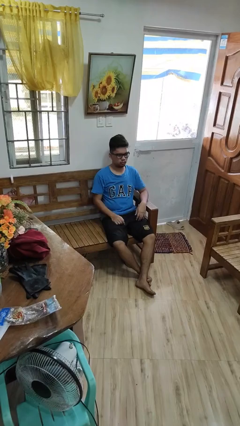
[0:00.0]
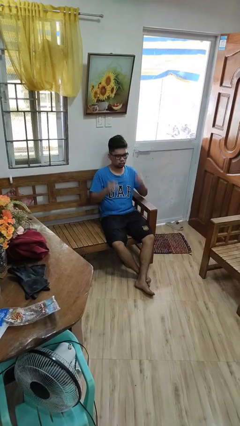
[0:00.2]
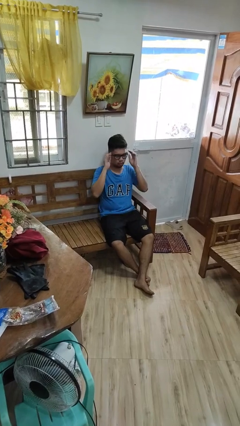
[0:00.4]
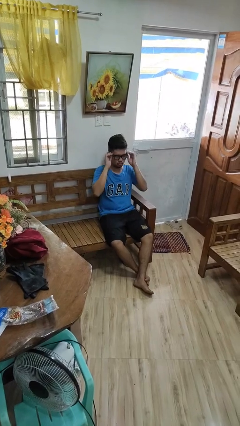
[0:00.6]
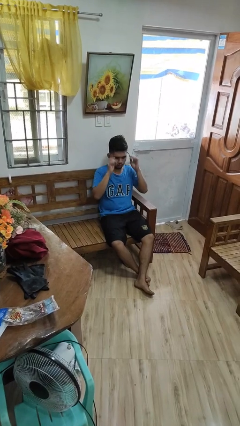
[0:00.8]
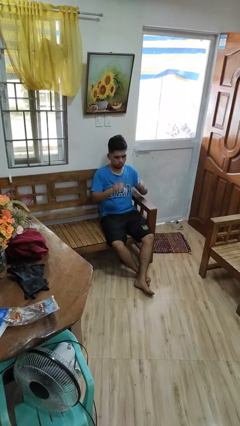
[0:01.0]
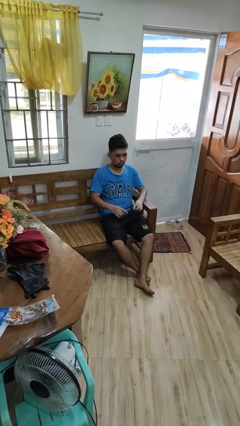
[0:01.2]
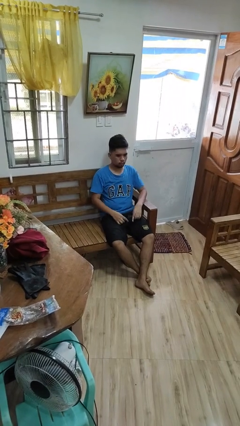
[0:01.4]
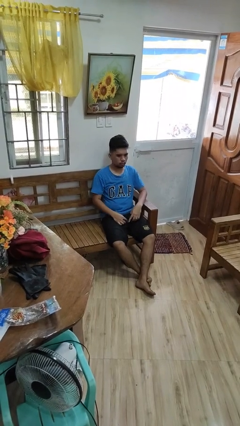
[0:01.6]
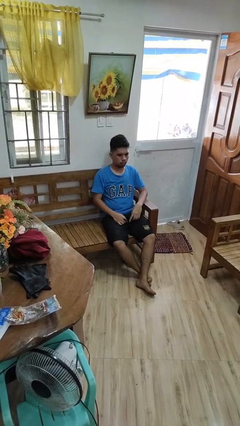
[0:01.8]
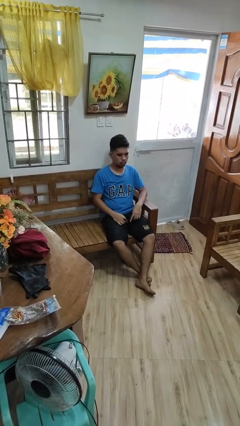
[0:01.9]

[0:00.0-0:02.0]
person takes off glasses

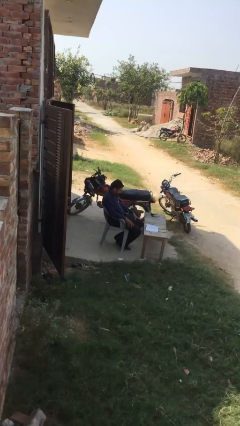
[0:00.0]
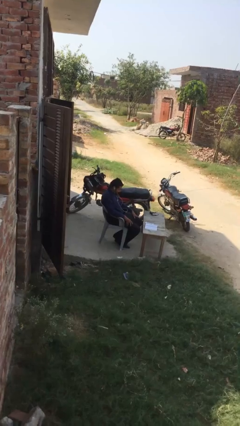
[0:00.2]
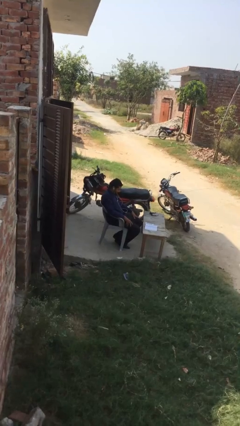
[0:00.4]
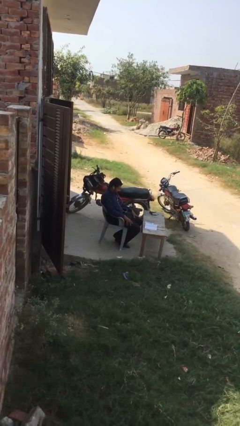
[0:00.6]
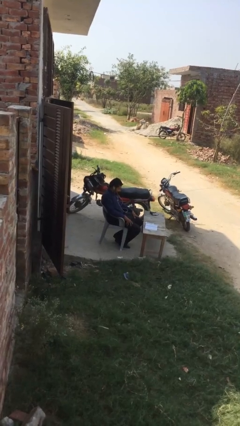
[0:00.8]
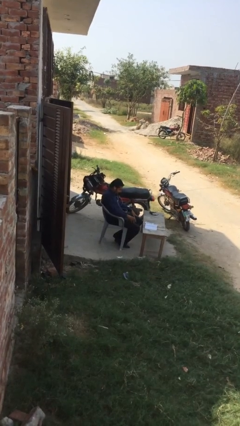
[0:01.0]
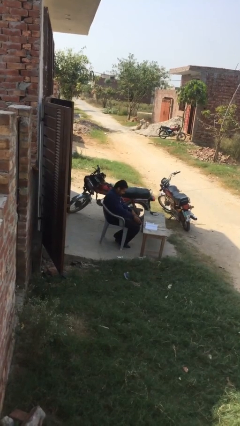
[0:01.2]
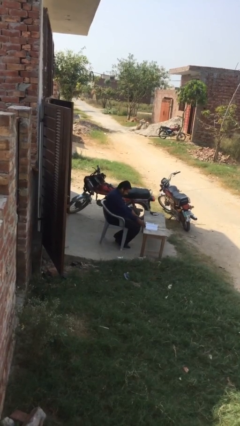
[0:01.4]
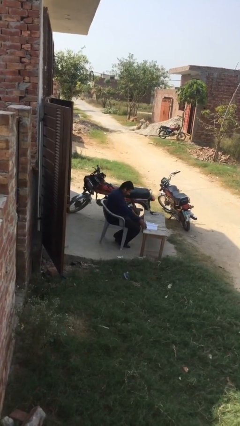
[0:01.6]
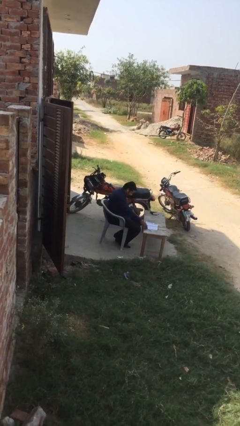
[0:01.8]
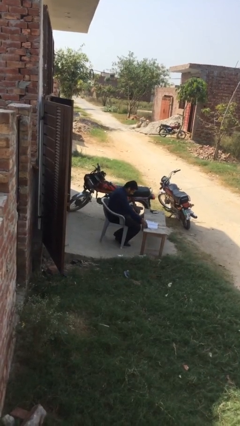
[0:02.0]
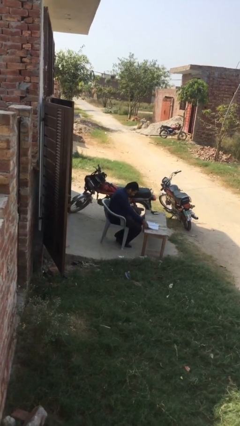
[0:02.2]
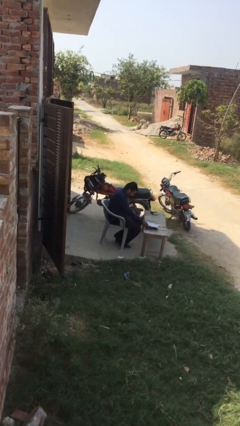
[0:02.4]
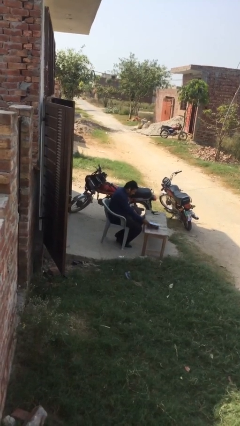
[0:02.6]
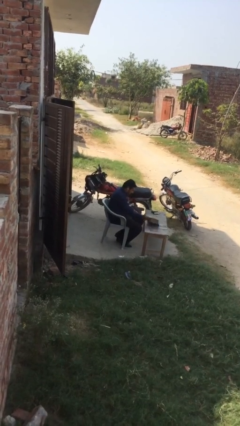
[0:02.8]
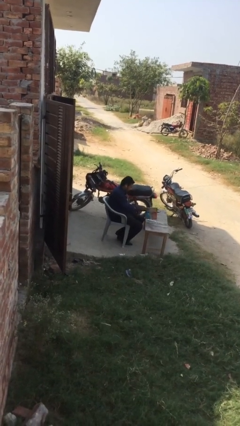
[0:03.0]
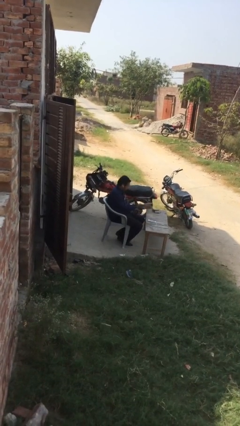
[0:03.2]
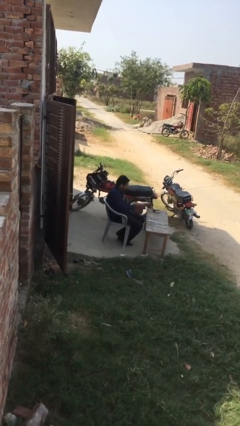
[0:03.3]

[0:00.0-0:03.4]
person picks up object from table

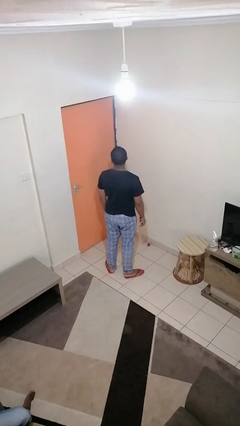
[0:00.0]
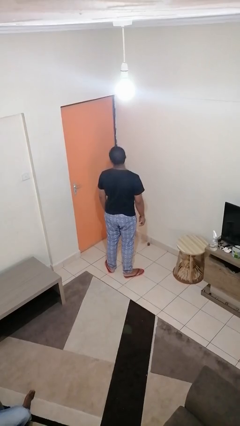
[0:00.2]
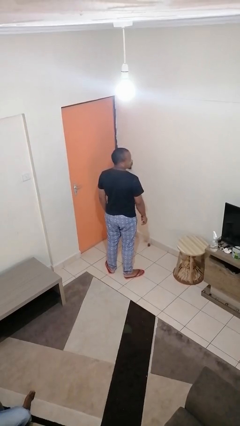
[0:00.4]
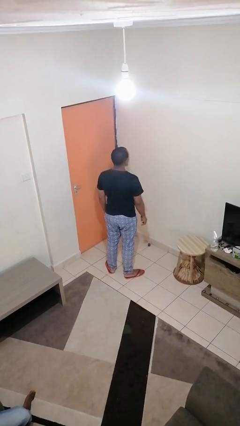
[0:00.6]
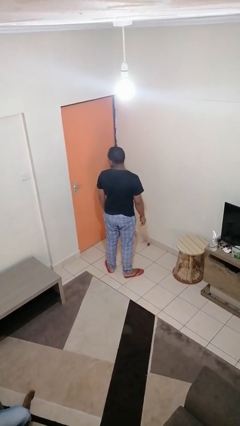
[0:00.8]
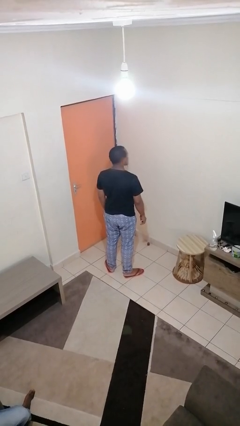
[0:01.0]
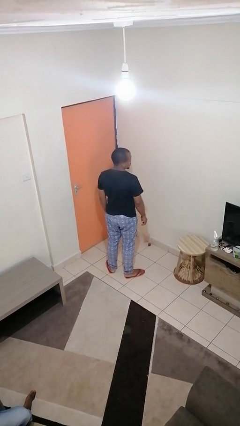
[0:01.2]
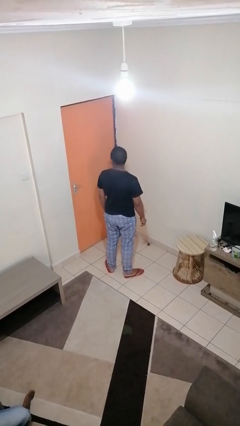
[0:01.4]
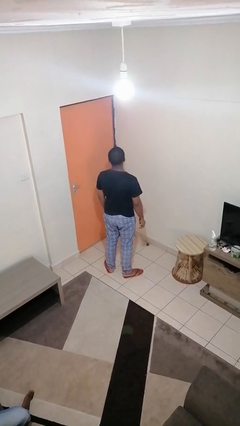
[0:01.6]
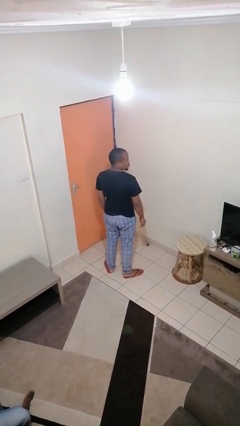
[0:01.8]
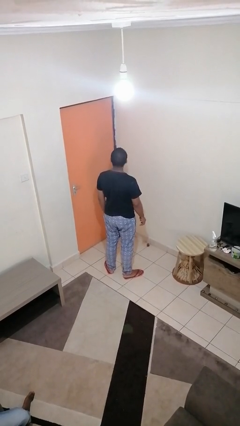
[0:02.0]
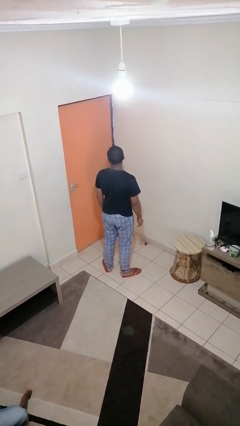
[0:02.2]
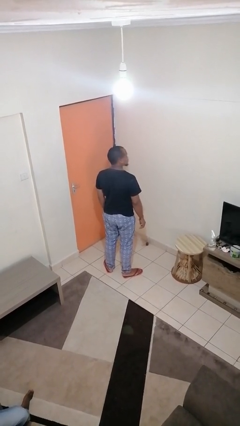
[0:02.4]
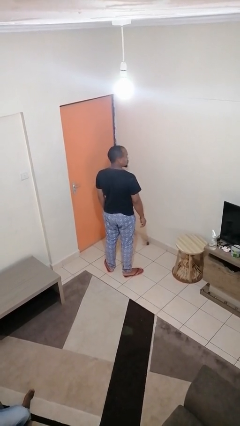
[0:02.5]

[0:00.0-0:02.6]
person shakes head

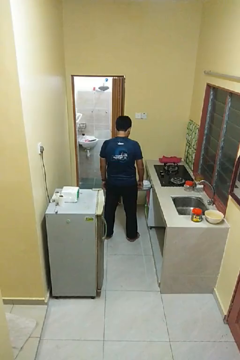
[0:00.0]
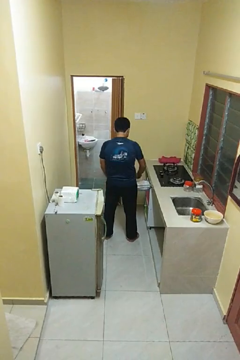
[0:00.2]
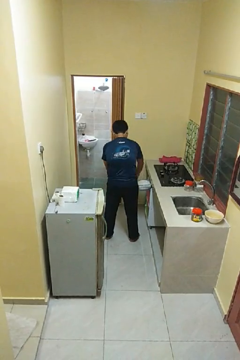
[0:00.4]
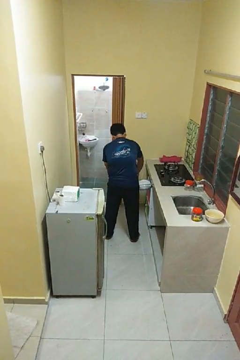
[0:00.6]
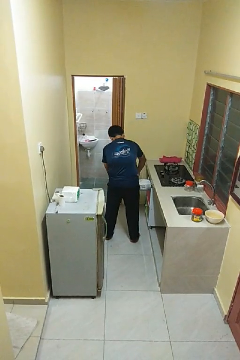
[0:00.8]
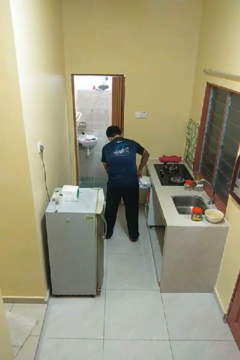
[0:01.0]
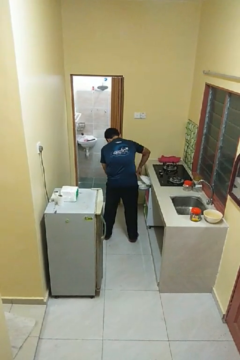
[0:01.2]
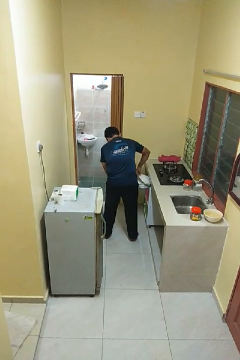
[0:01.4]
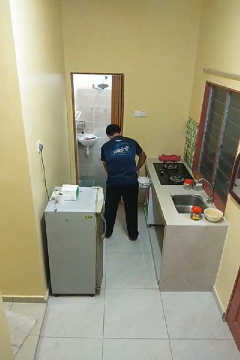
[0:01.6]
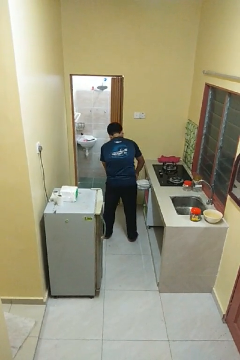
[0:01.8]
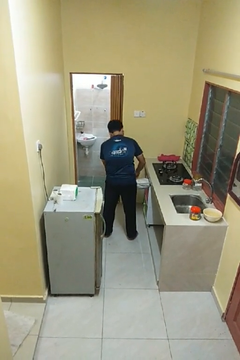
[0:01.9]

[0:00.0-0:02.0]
person searches in kitchen drawer

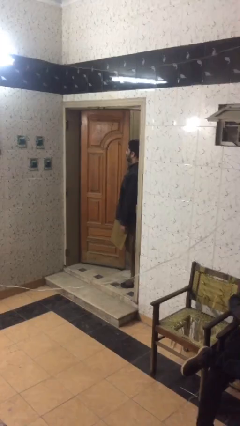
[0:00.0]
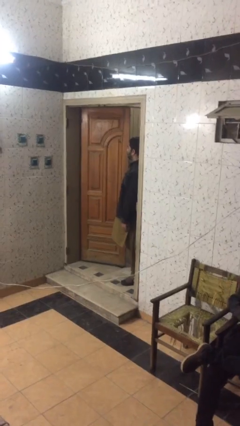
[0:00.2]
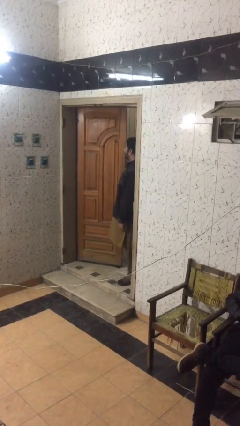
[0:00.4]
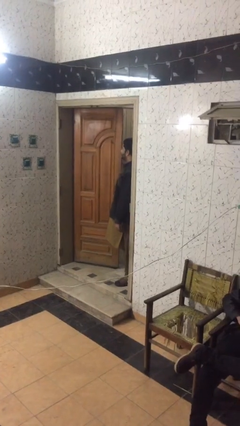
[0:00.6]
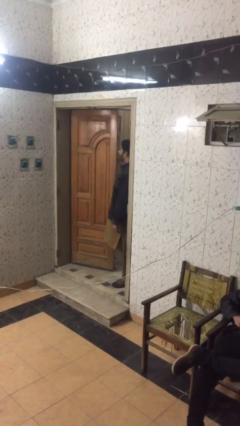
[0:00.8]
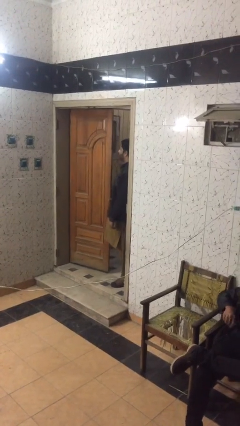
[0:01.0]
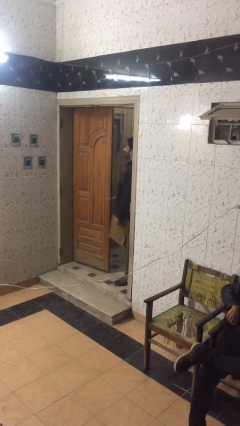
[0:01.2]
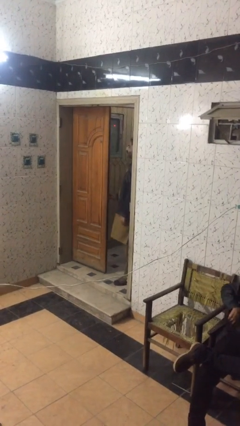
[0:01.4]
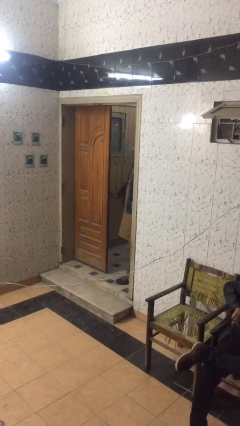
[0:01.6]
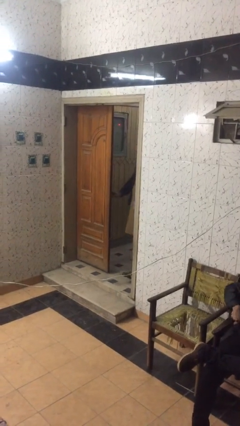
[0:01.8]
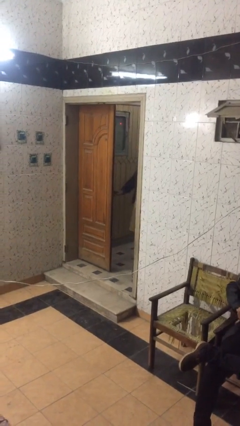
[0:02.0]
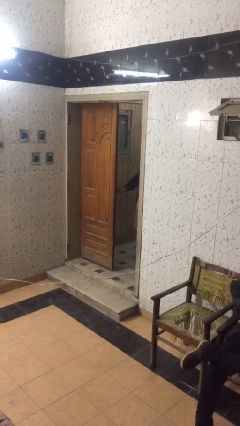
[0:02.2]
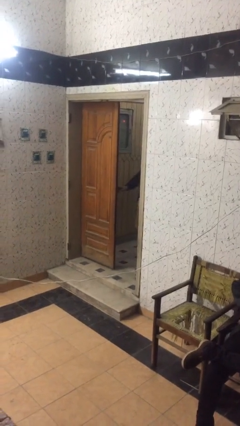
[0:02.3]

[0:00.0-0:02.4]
person closes facility door

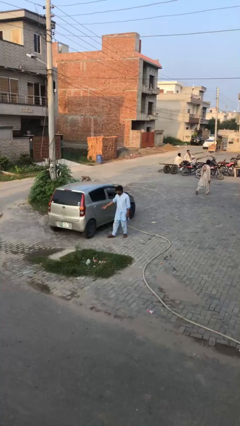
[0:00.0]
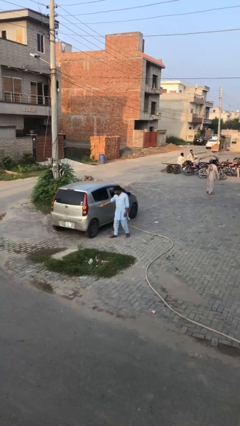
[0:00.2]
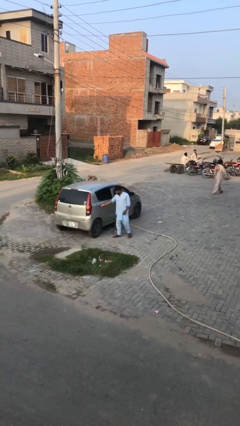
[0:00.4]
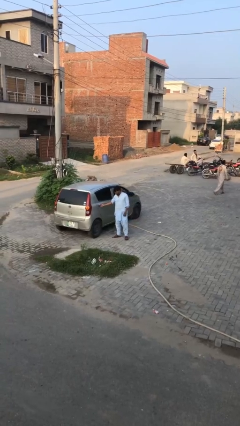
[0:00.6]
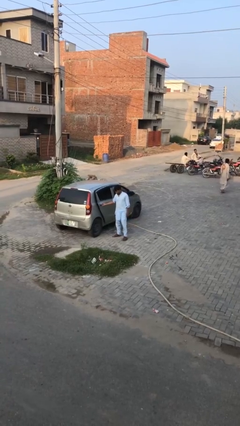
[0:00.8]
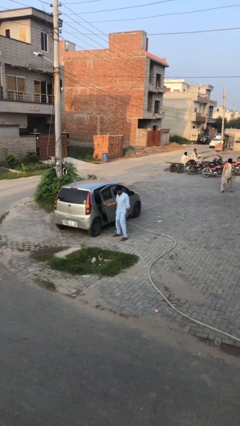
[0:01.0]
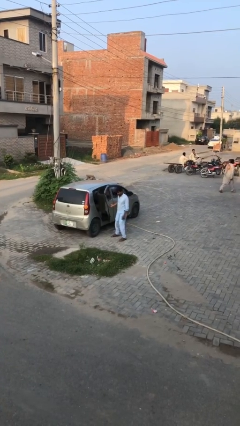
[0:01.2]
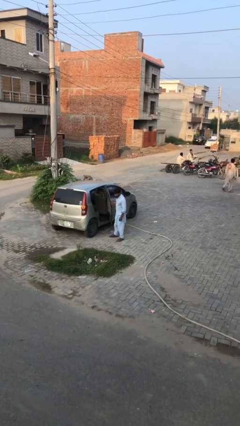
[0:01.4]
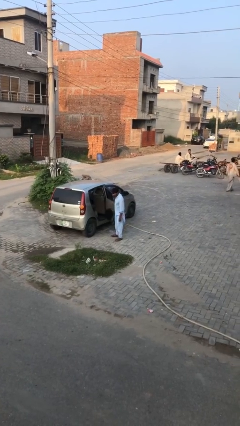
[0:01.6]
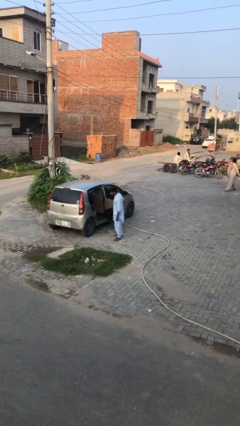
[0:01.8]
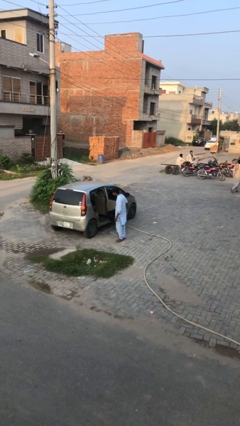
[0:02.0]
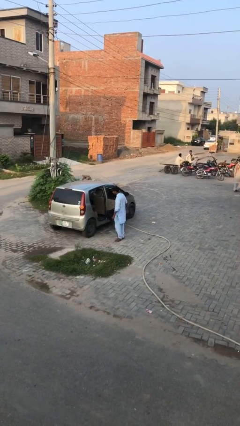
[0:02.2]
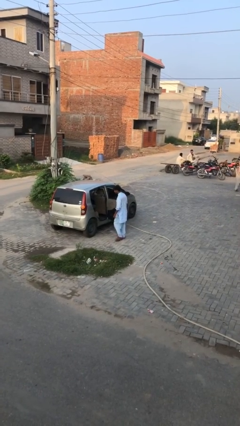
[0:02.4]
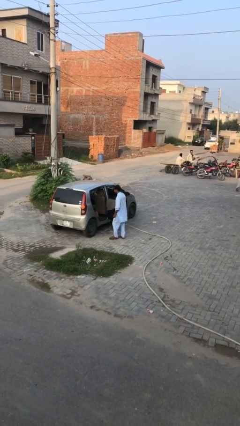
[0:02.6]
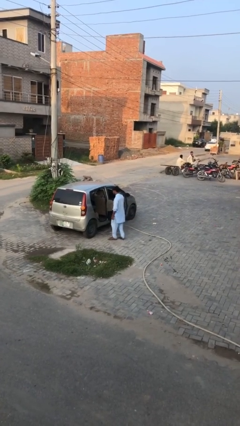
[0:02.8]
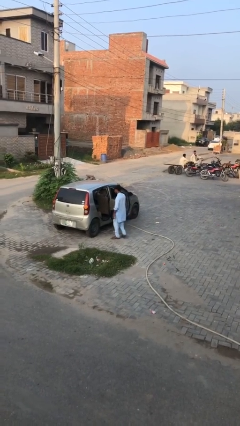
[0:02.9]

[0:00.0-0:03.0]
person opens car door

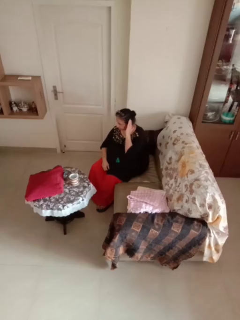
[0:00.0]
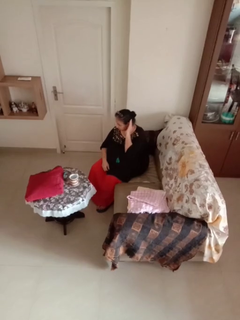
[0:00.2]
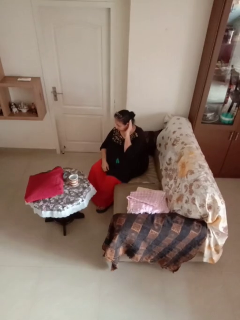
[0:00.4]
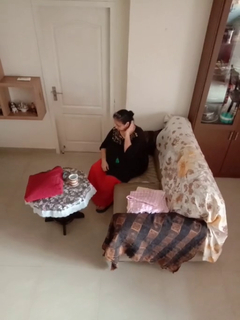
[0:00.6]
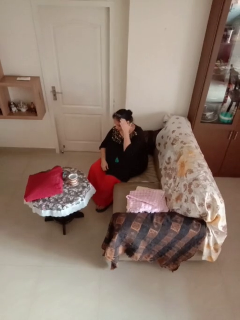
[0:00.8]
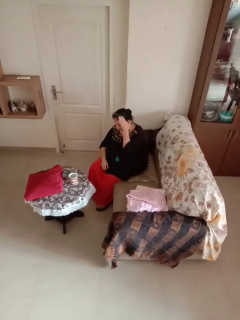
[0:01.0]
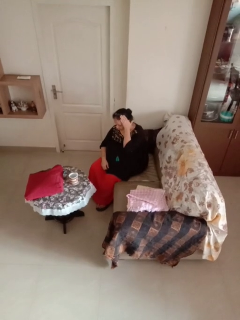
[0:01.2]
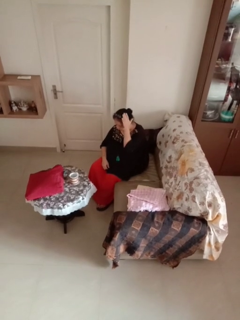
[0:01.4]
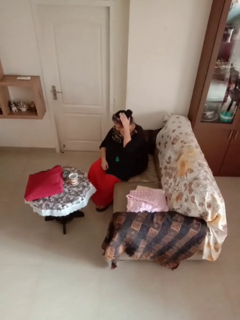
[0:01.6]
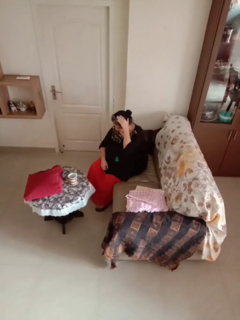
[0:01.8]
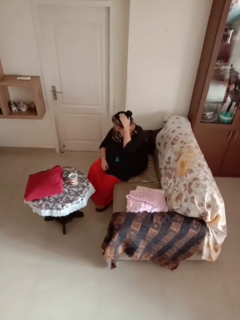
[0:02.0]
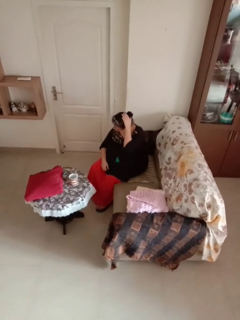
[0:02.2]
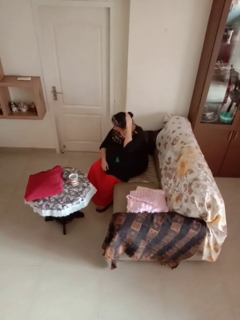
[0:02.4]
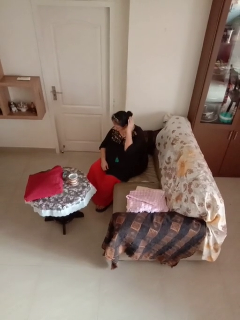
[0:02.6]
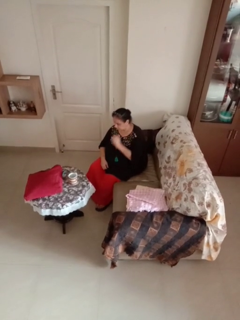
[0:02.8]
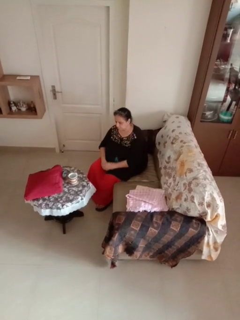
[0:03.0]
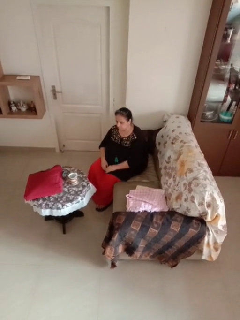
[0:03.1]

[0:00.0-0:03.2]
person strokes hair
